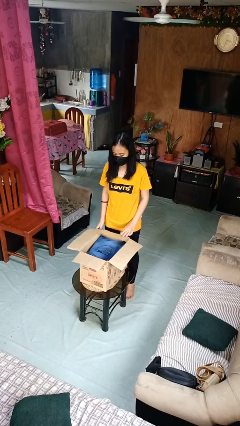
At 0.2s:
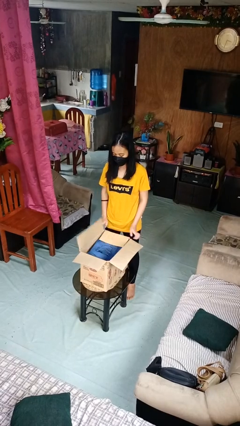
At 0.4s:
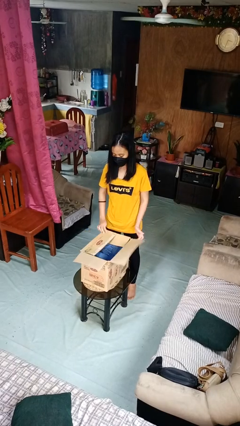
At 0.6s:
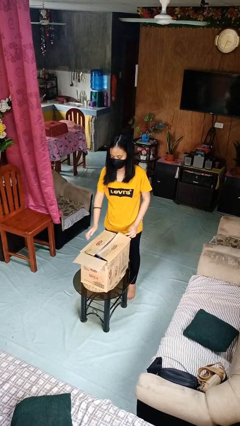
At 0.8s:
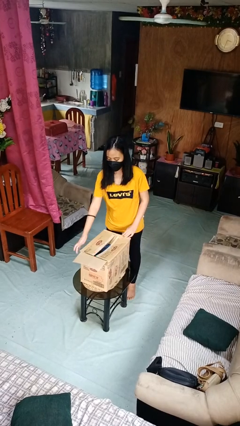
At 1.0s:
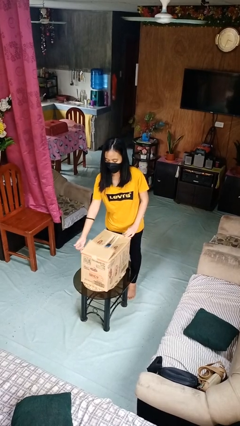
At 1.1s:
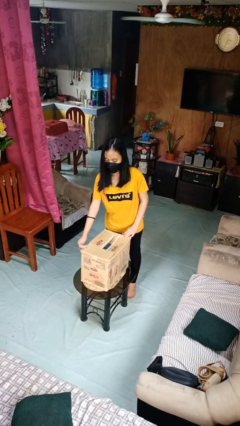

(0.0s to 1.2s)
person closes box

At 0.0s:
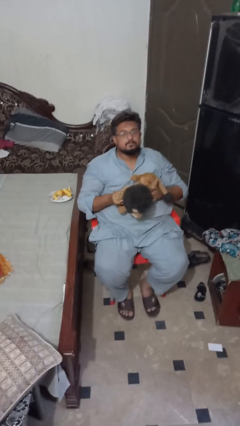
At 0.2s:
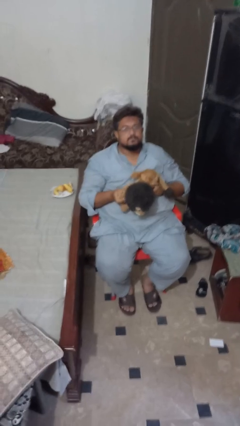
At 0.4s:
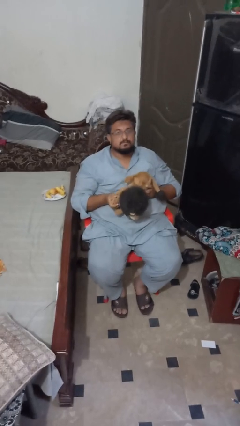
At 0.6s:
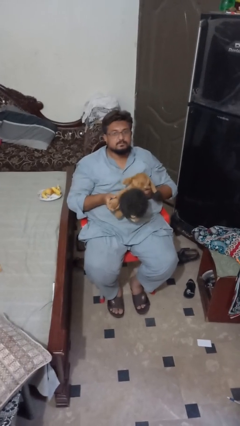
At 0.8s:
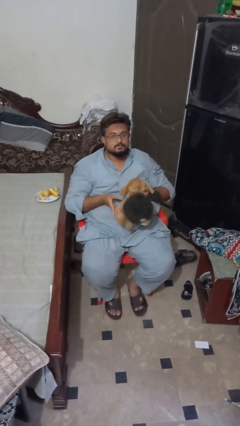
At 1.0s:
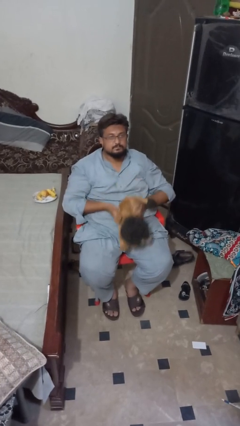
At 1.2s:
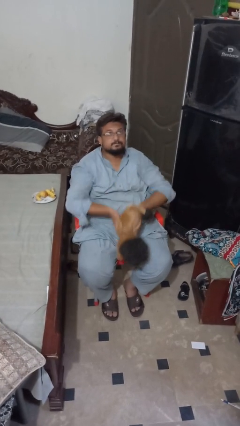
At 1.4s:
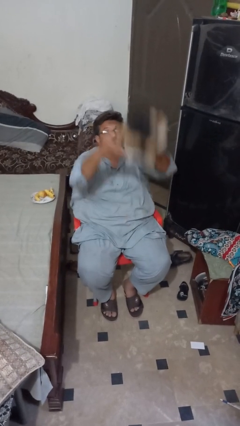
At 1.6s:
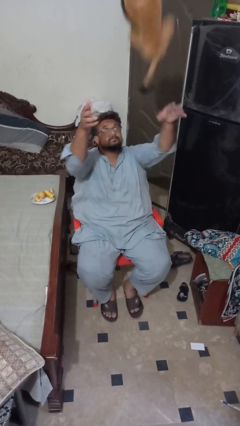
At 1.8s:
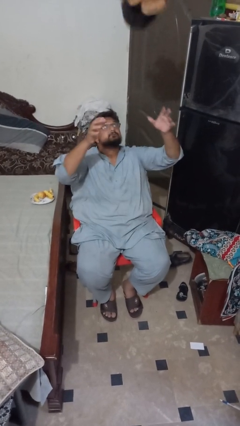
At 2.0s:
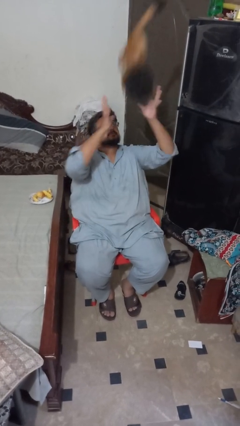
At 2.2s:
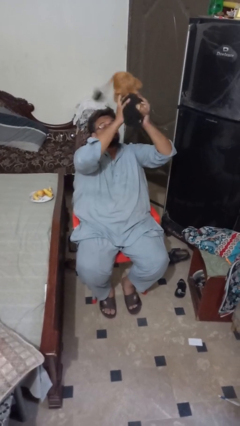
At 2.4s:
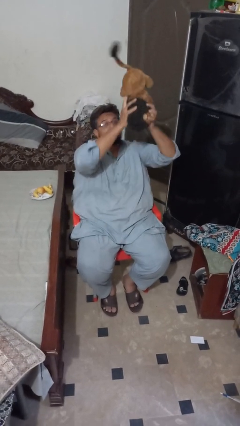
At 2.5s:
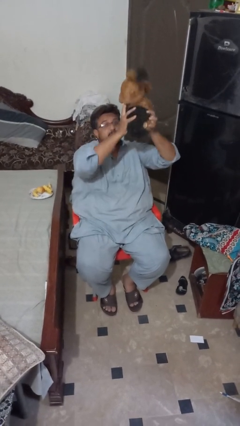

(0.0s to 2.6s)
person drops object

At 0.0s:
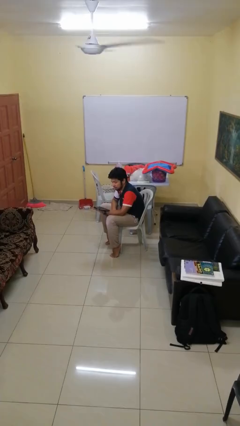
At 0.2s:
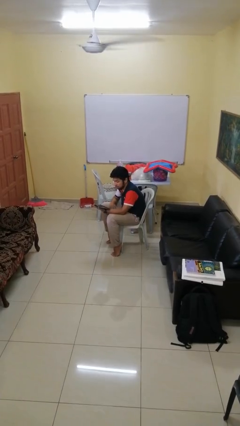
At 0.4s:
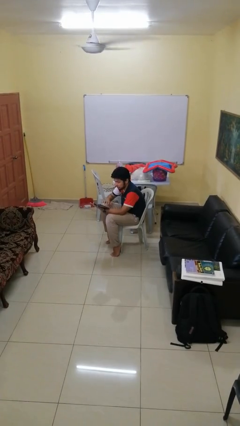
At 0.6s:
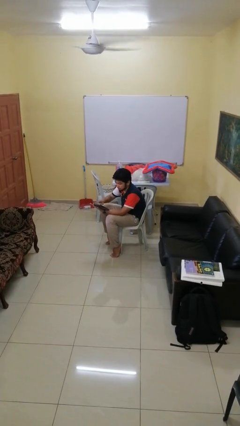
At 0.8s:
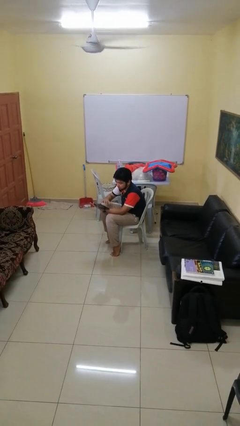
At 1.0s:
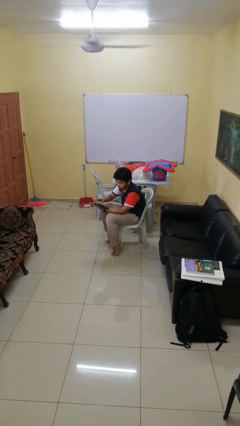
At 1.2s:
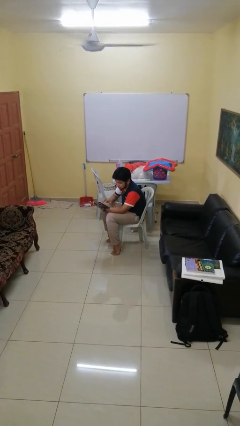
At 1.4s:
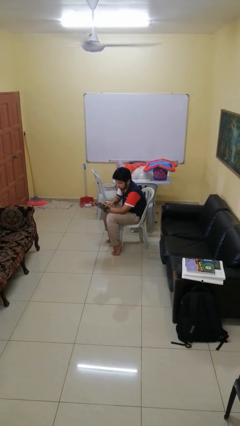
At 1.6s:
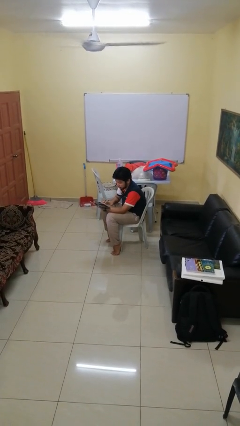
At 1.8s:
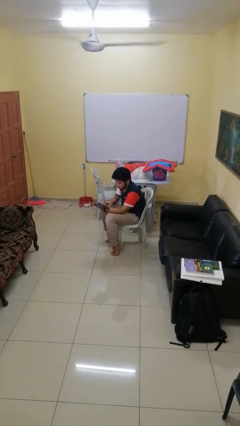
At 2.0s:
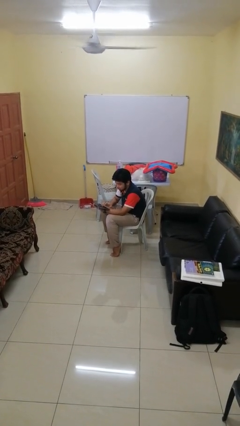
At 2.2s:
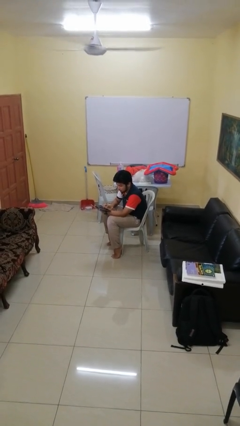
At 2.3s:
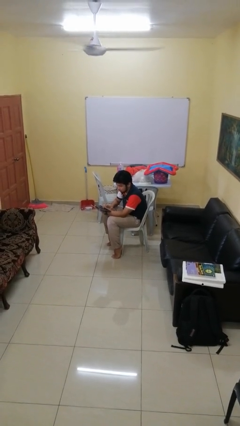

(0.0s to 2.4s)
person interacts with tablet

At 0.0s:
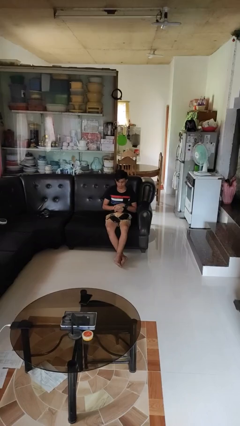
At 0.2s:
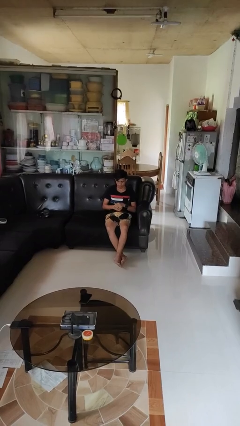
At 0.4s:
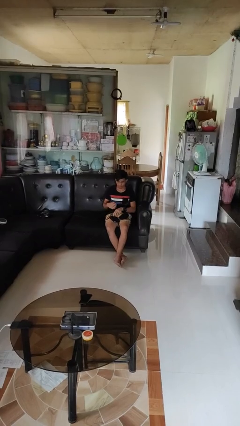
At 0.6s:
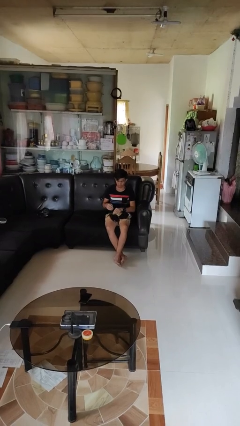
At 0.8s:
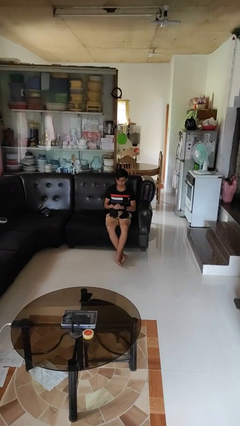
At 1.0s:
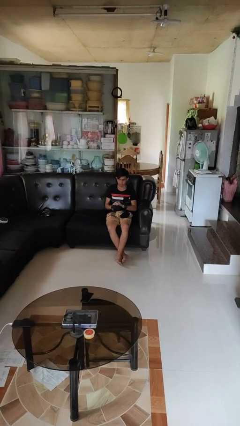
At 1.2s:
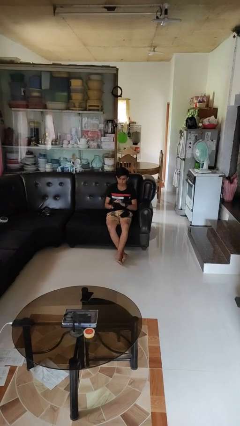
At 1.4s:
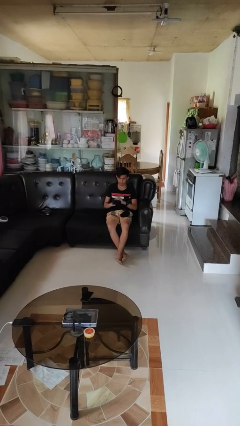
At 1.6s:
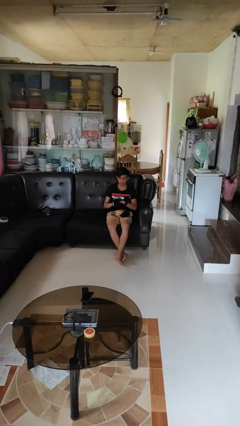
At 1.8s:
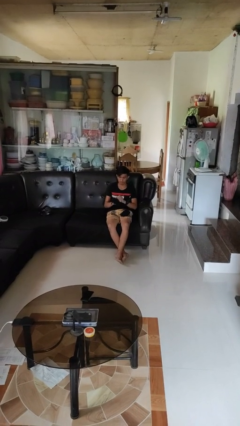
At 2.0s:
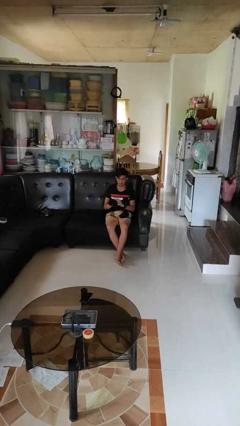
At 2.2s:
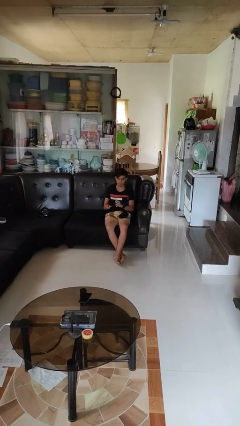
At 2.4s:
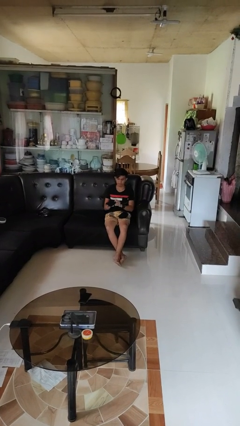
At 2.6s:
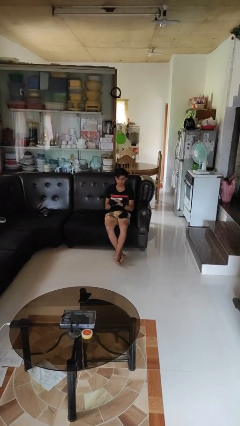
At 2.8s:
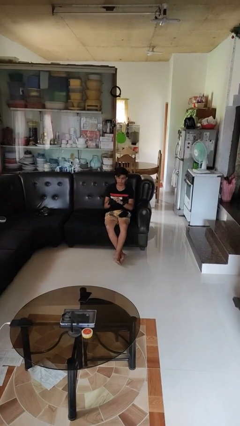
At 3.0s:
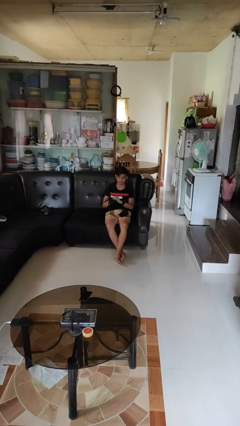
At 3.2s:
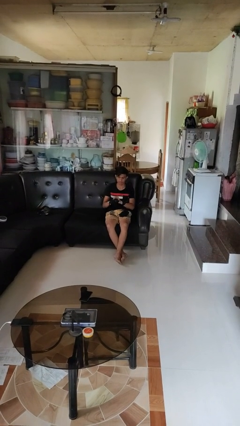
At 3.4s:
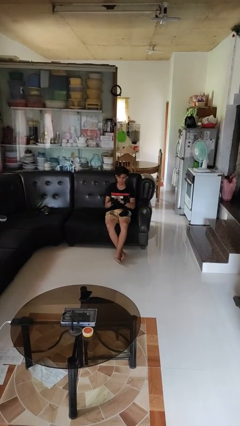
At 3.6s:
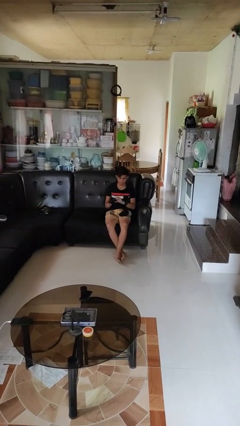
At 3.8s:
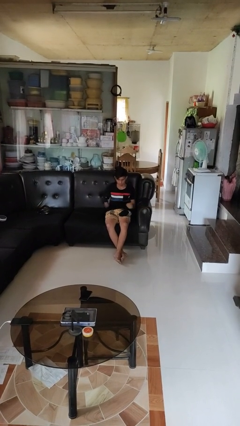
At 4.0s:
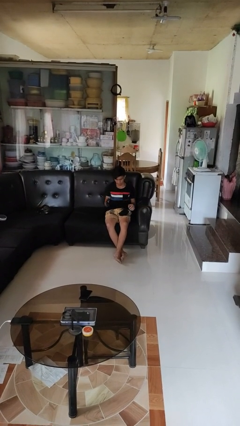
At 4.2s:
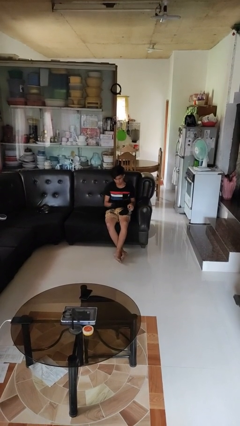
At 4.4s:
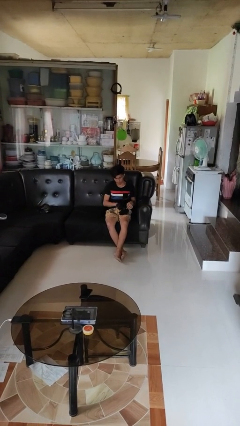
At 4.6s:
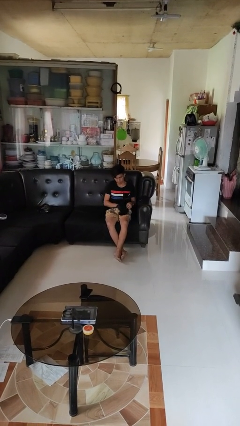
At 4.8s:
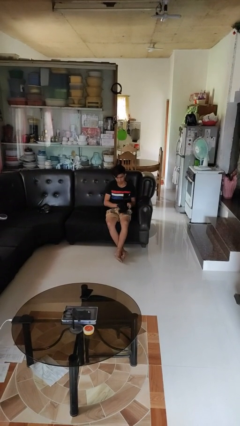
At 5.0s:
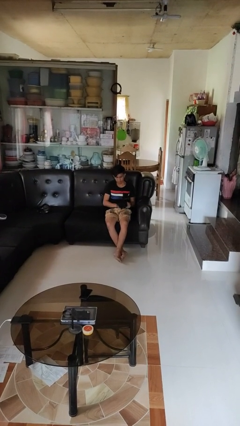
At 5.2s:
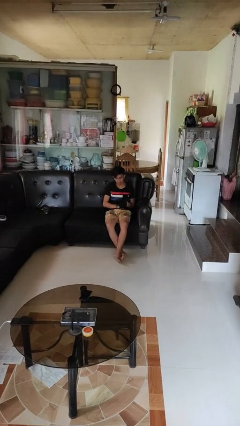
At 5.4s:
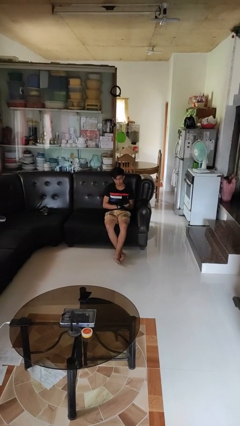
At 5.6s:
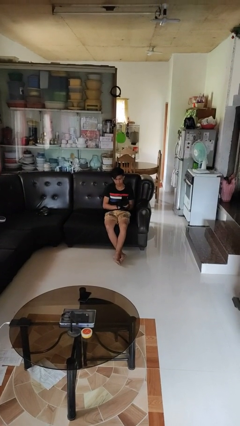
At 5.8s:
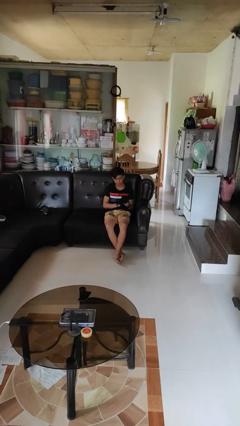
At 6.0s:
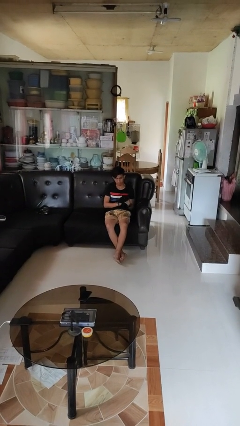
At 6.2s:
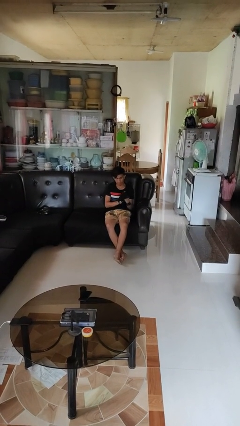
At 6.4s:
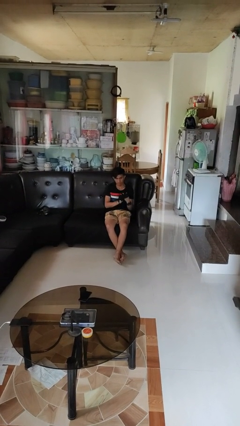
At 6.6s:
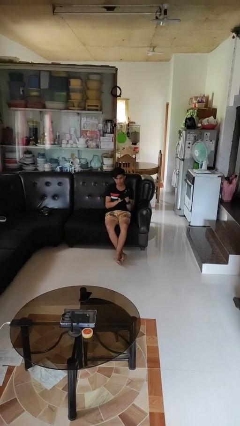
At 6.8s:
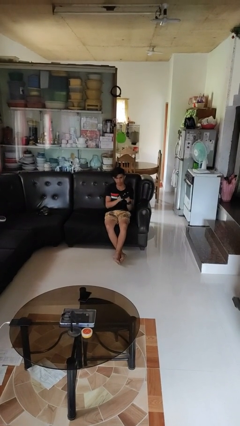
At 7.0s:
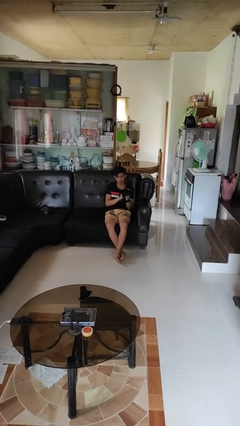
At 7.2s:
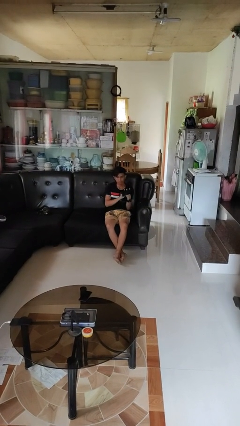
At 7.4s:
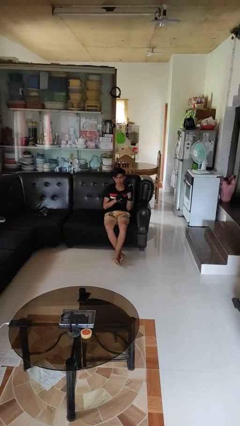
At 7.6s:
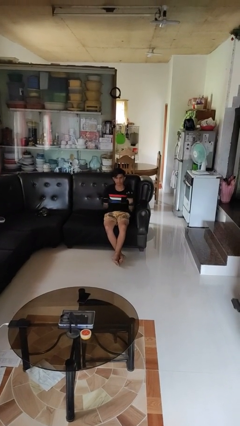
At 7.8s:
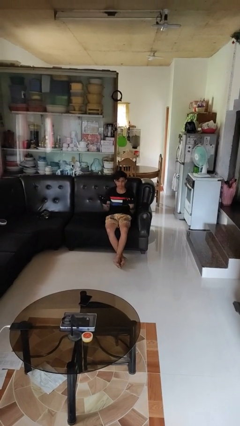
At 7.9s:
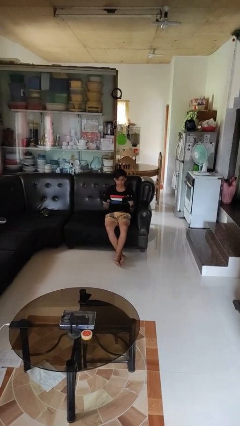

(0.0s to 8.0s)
person puts on gloves

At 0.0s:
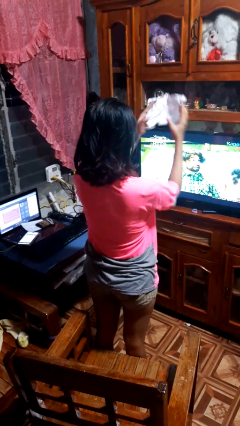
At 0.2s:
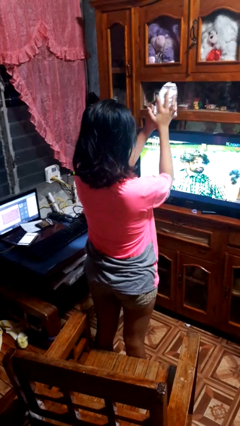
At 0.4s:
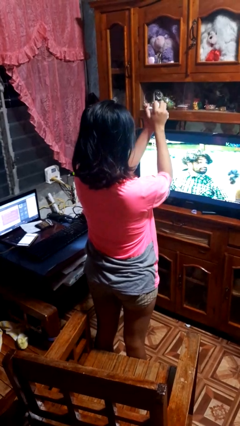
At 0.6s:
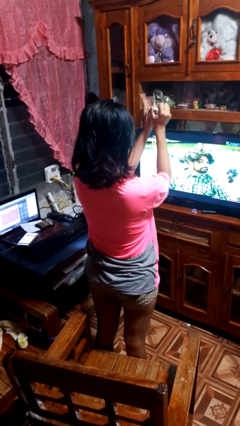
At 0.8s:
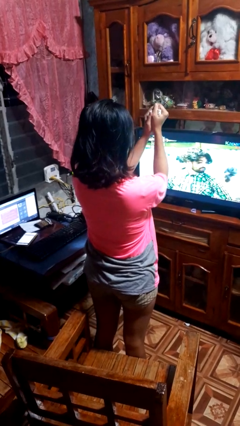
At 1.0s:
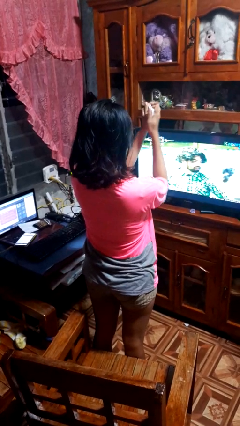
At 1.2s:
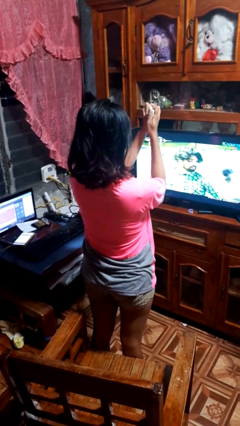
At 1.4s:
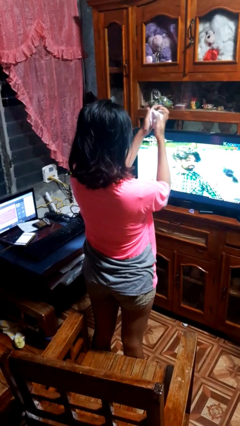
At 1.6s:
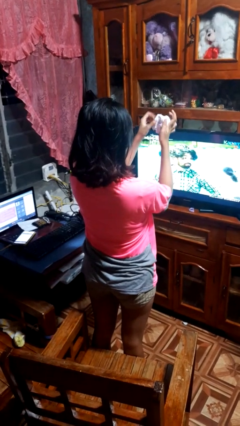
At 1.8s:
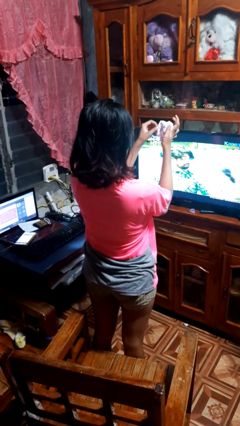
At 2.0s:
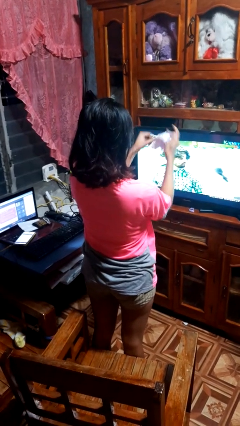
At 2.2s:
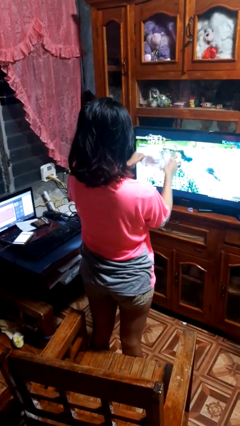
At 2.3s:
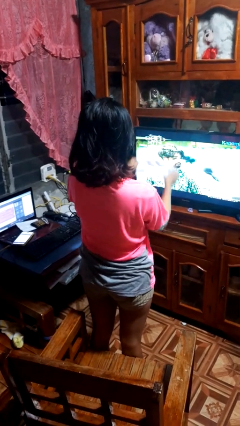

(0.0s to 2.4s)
person crumples paper

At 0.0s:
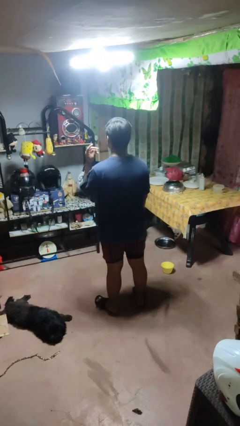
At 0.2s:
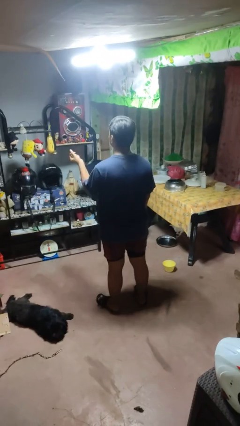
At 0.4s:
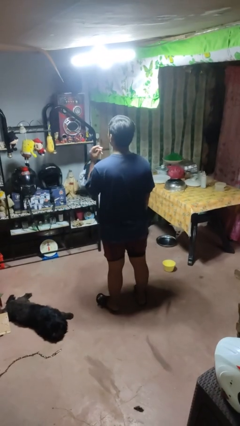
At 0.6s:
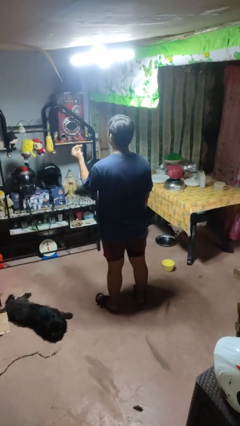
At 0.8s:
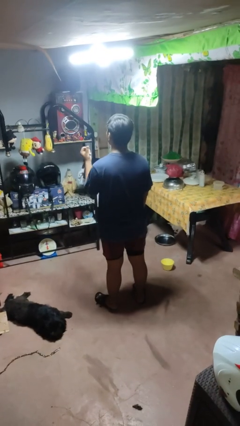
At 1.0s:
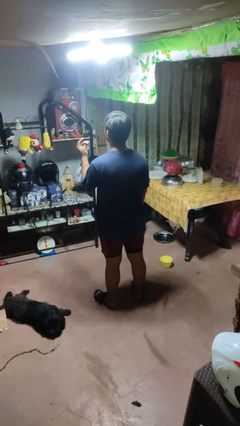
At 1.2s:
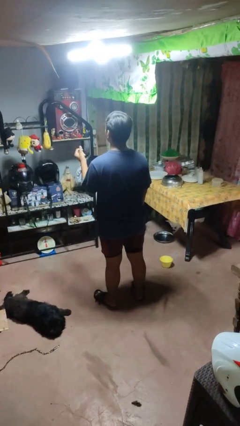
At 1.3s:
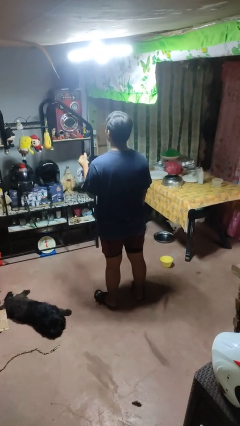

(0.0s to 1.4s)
person snaps fingers
